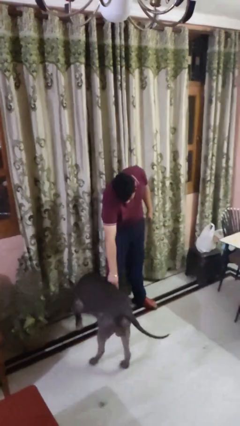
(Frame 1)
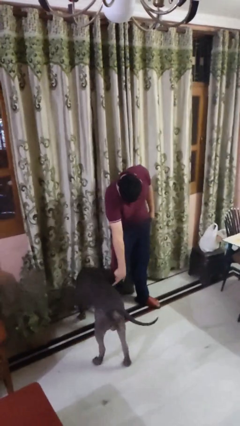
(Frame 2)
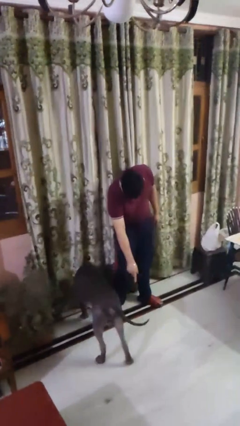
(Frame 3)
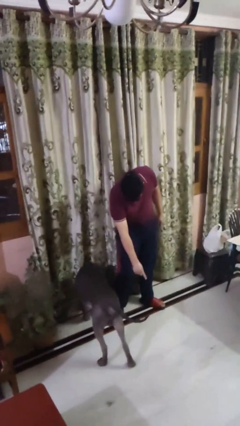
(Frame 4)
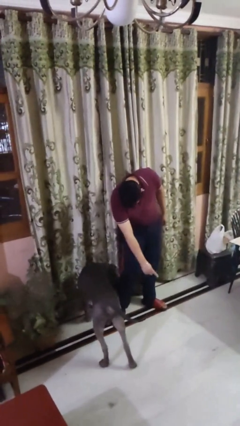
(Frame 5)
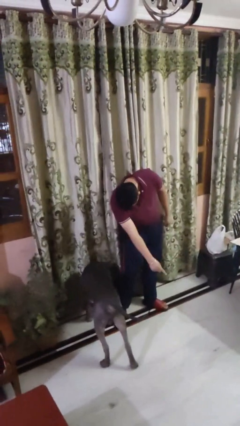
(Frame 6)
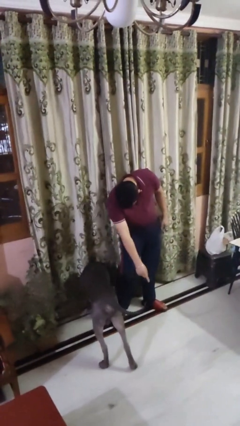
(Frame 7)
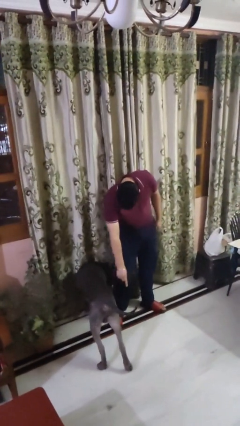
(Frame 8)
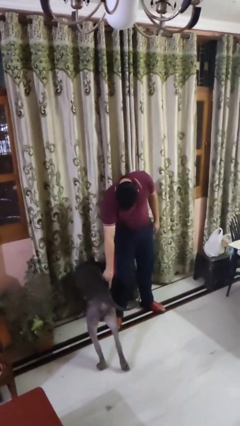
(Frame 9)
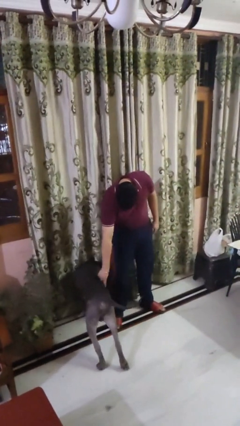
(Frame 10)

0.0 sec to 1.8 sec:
person points to dog

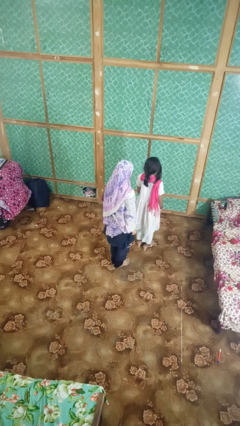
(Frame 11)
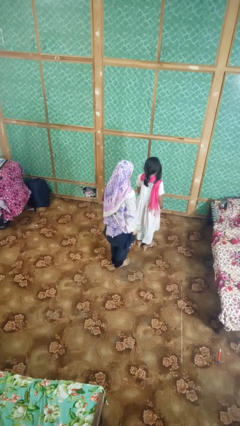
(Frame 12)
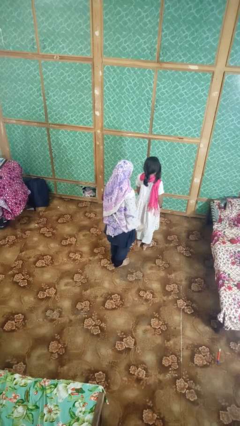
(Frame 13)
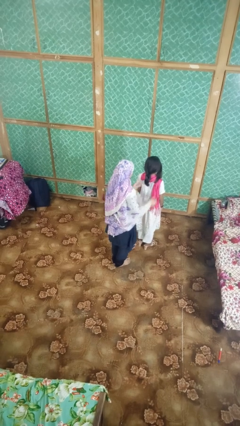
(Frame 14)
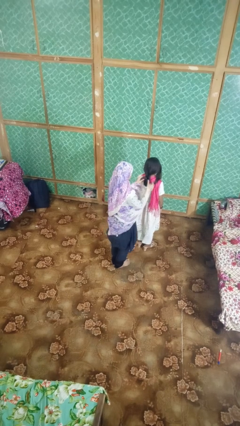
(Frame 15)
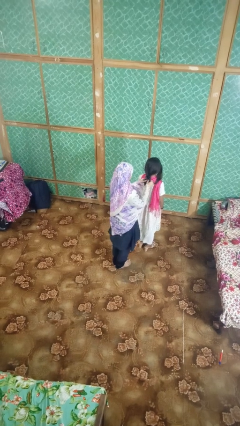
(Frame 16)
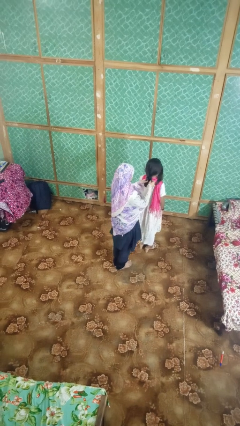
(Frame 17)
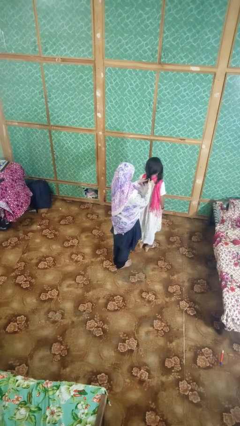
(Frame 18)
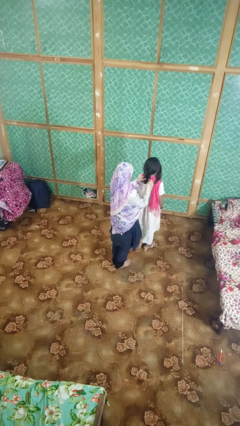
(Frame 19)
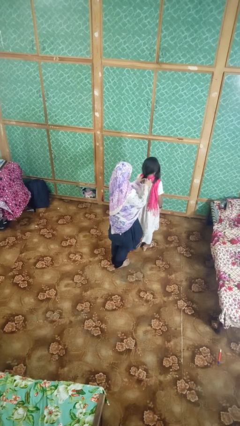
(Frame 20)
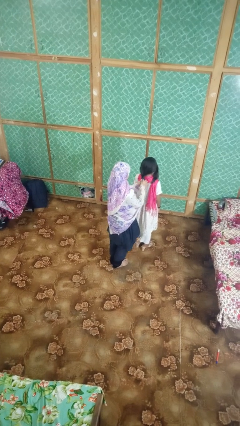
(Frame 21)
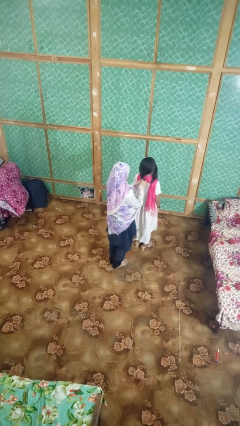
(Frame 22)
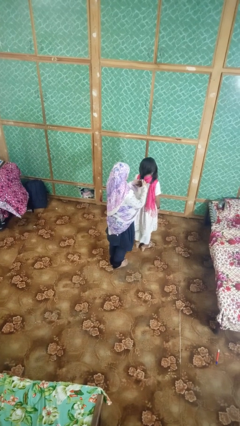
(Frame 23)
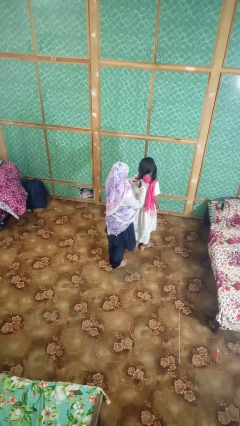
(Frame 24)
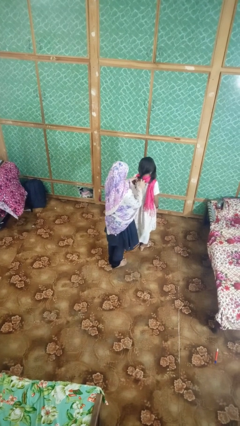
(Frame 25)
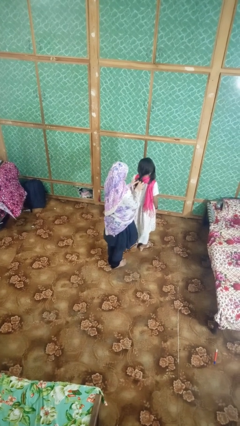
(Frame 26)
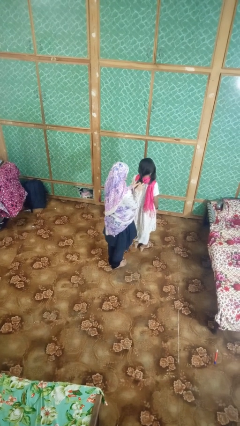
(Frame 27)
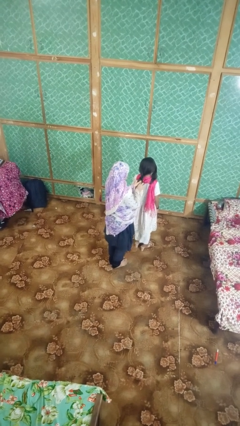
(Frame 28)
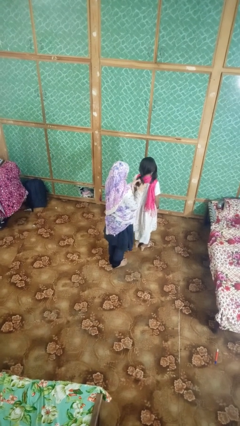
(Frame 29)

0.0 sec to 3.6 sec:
person braids hair of person

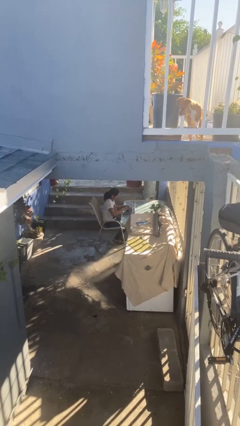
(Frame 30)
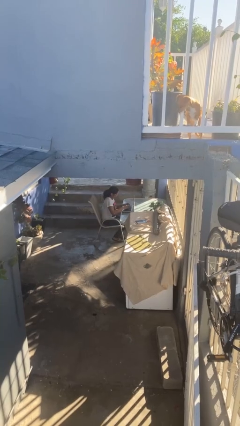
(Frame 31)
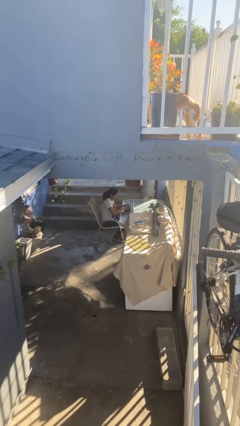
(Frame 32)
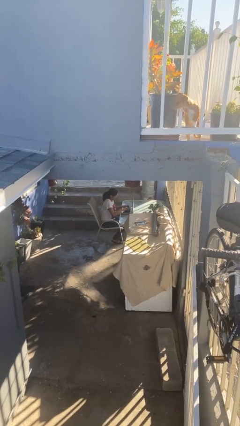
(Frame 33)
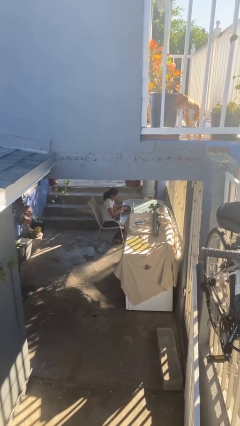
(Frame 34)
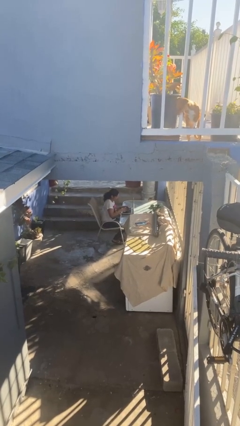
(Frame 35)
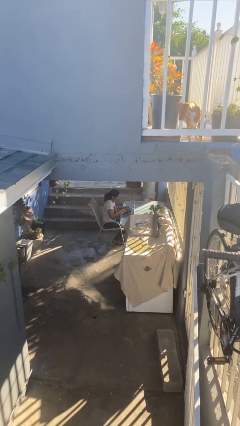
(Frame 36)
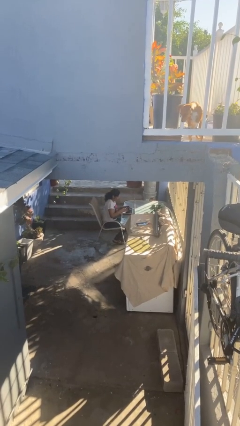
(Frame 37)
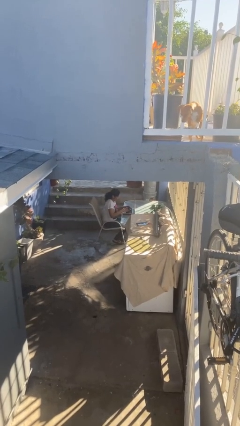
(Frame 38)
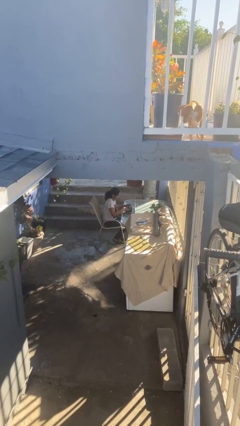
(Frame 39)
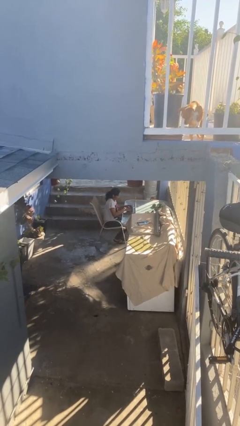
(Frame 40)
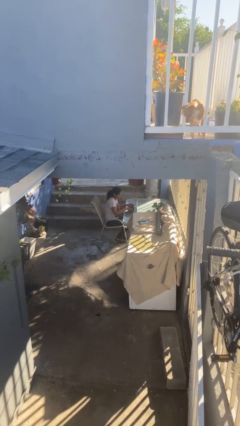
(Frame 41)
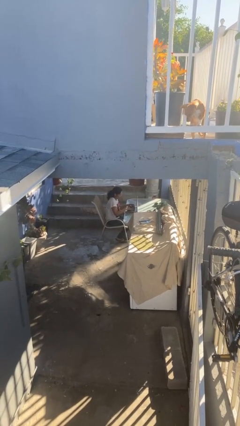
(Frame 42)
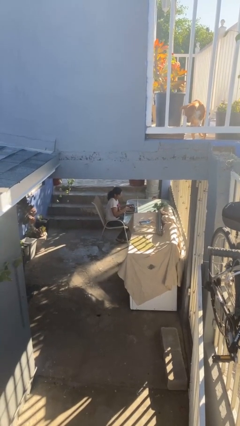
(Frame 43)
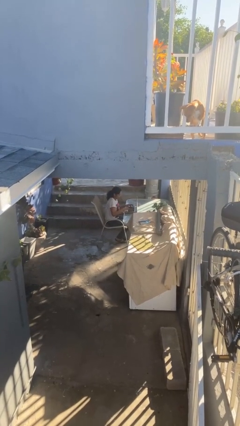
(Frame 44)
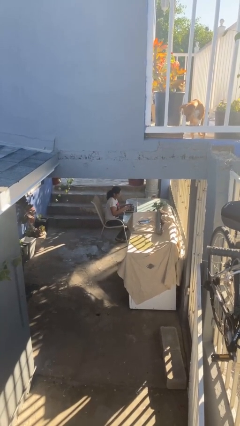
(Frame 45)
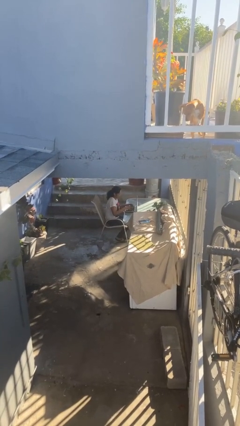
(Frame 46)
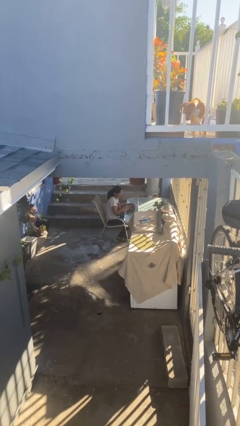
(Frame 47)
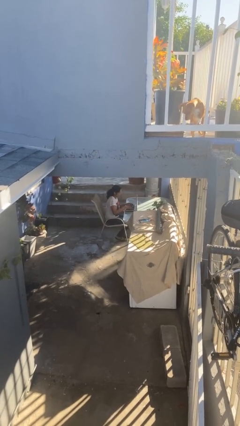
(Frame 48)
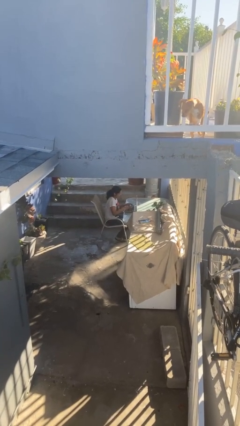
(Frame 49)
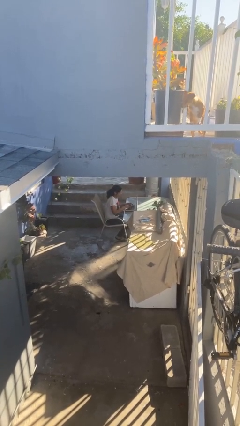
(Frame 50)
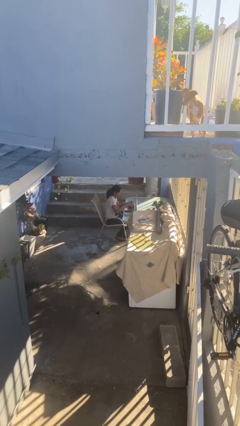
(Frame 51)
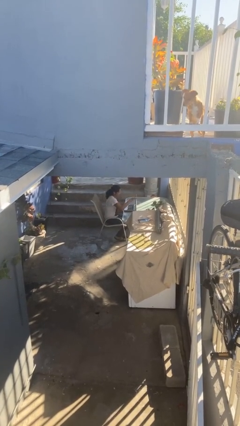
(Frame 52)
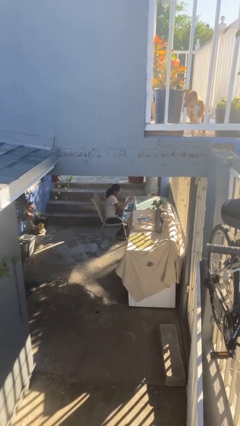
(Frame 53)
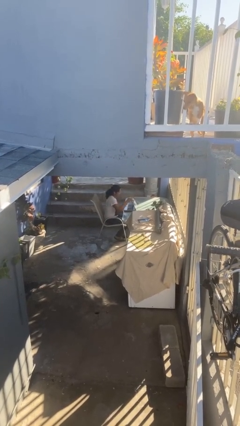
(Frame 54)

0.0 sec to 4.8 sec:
person interacts with laptop

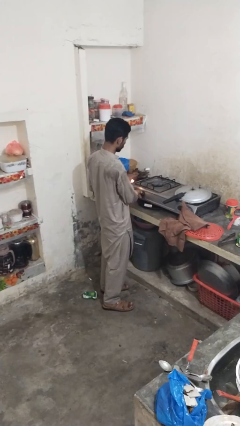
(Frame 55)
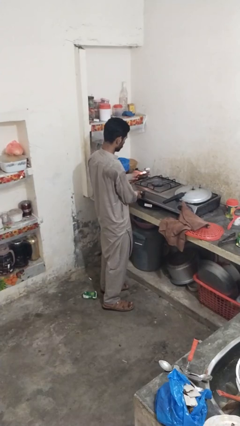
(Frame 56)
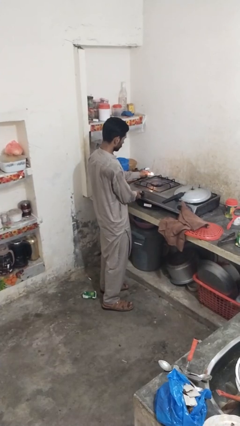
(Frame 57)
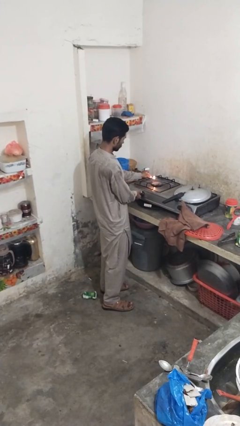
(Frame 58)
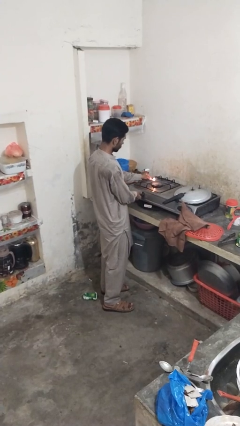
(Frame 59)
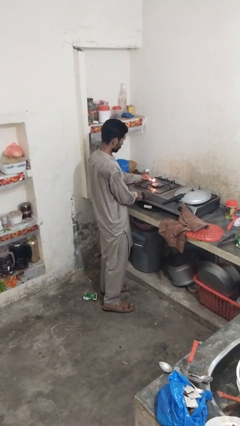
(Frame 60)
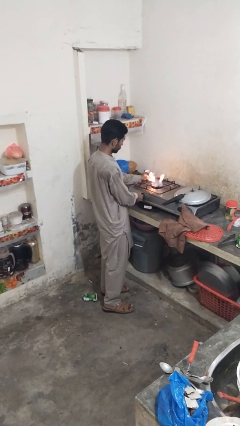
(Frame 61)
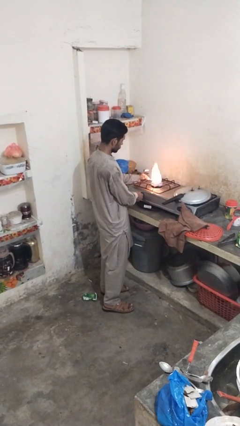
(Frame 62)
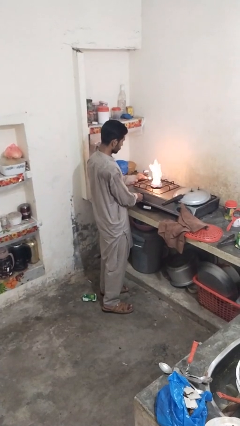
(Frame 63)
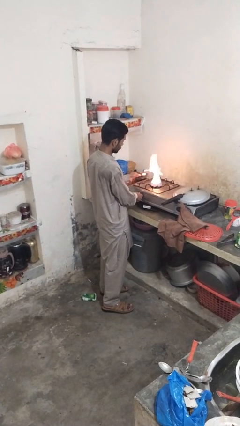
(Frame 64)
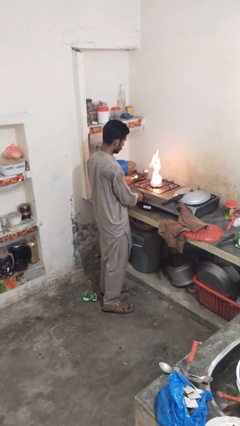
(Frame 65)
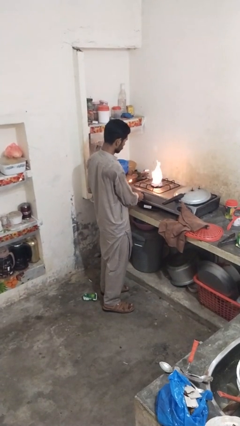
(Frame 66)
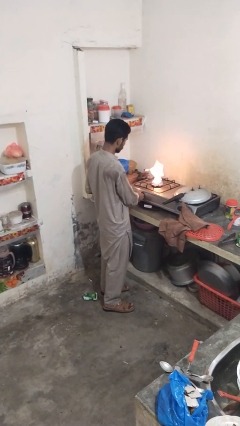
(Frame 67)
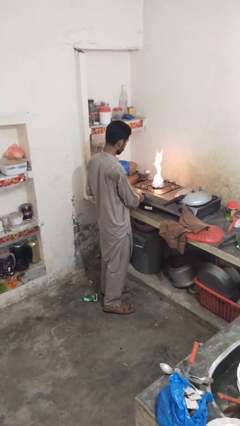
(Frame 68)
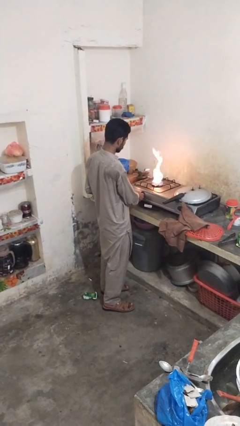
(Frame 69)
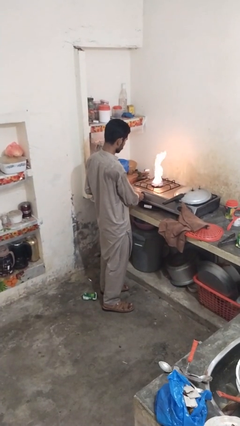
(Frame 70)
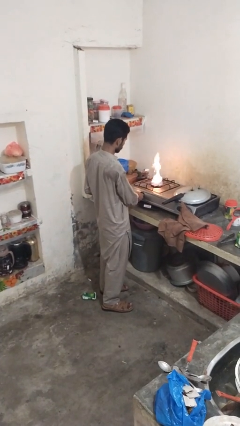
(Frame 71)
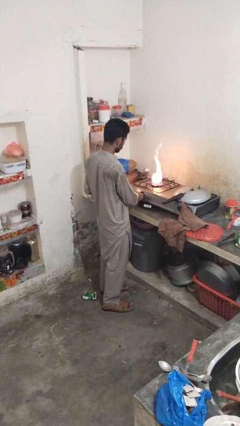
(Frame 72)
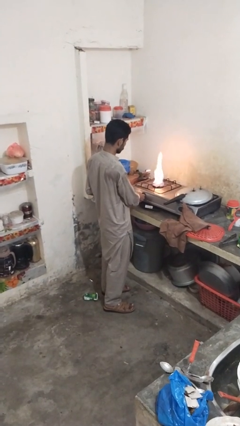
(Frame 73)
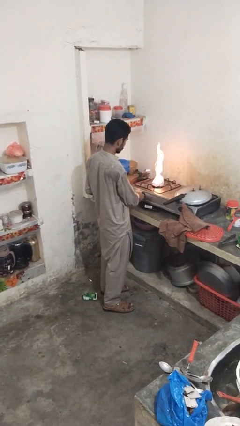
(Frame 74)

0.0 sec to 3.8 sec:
person turns on stovetop

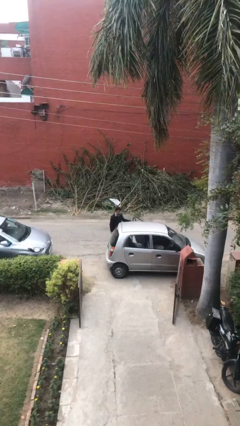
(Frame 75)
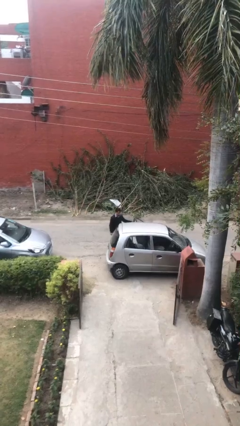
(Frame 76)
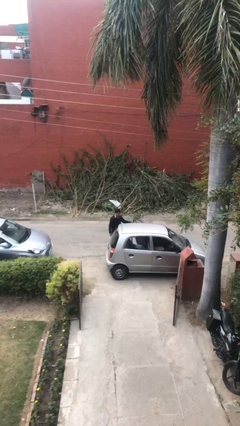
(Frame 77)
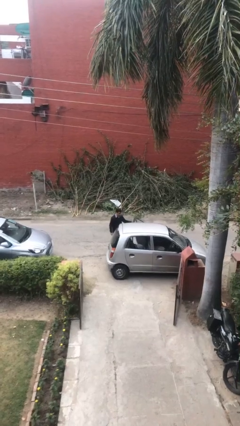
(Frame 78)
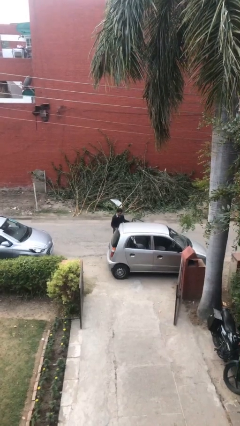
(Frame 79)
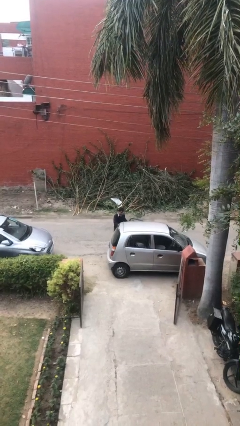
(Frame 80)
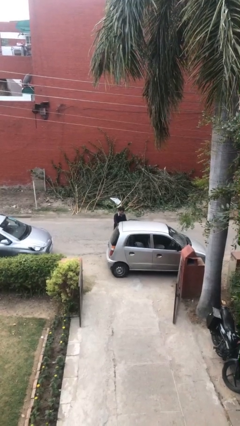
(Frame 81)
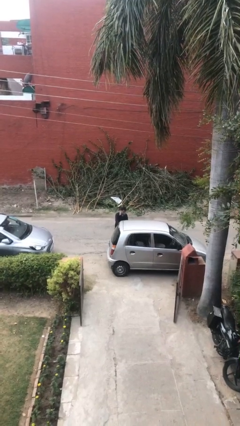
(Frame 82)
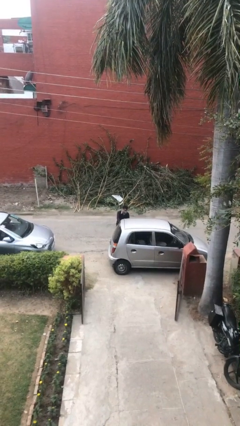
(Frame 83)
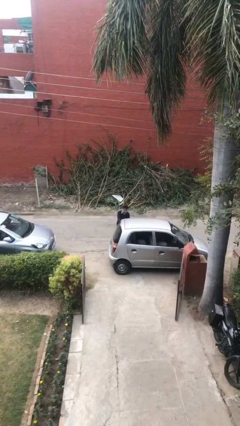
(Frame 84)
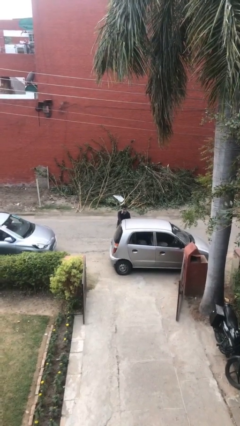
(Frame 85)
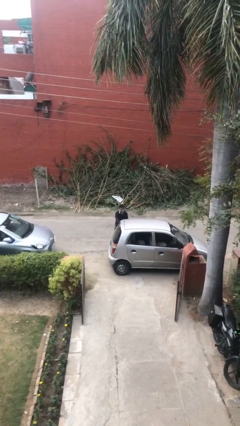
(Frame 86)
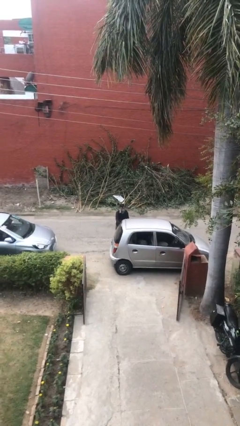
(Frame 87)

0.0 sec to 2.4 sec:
person closes car door

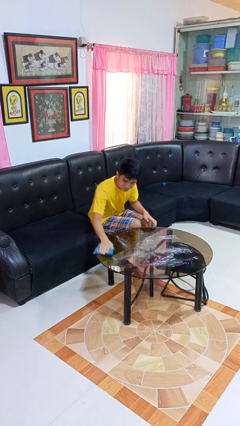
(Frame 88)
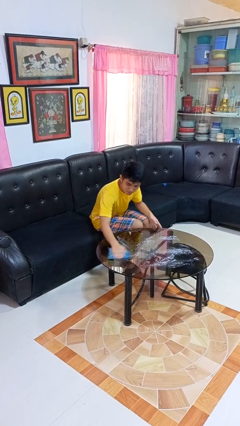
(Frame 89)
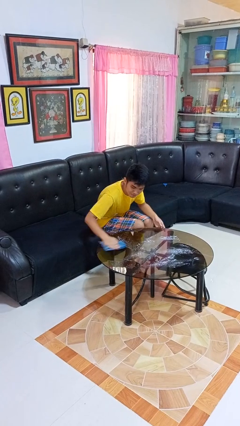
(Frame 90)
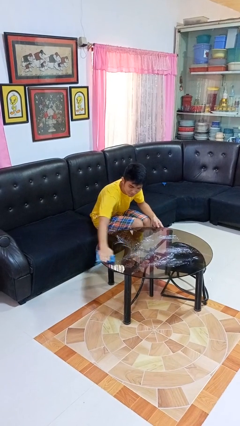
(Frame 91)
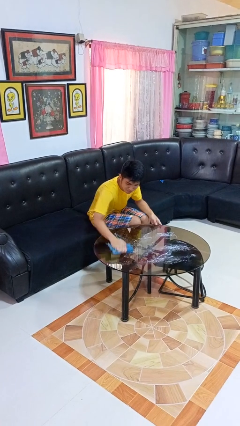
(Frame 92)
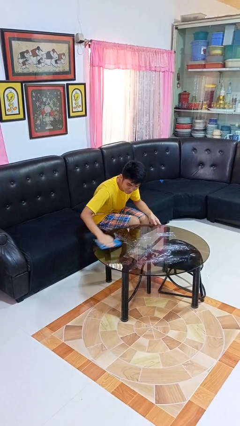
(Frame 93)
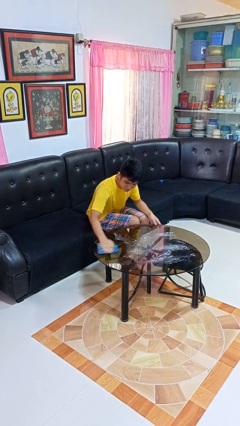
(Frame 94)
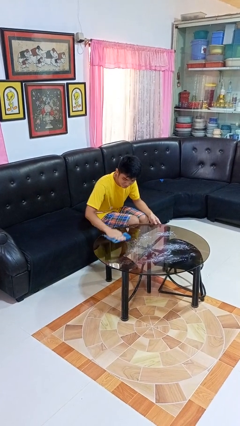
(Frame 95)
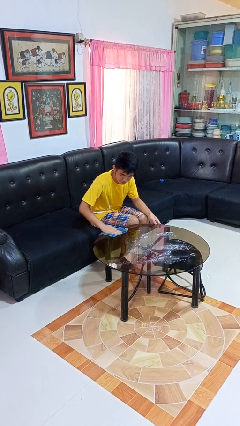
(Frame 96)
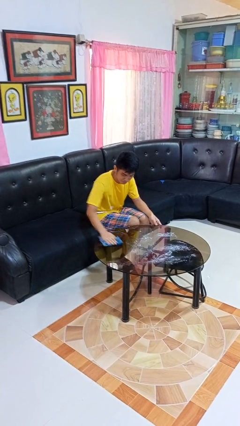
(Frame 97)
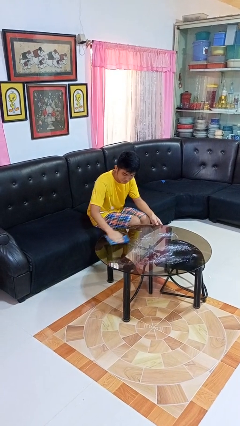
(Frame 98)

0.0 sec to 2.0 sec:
person cleans table with rag
